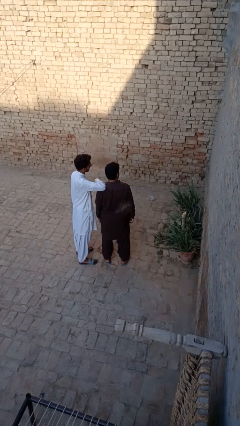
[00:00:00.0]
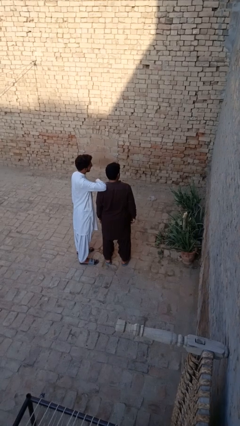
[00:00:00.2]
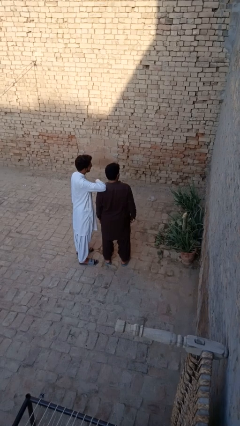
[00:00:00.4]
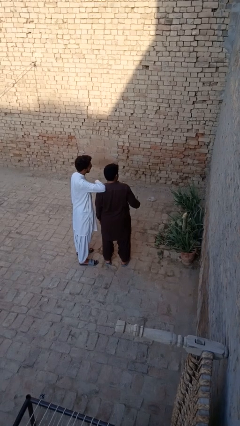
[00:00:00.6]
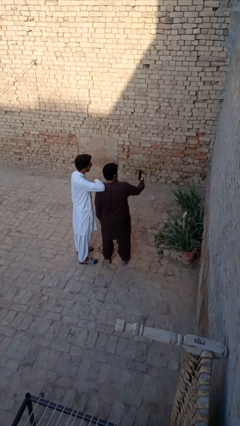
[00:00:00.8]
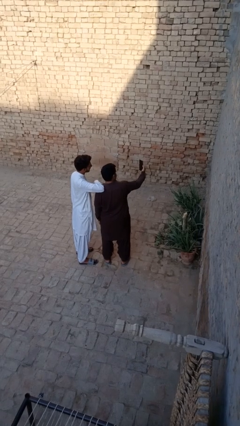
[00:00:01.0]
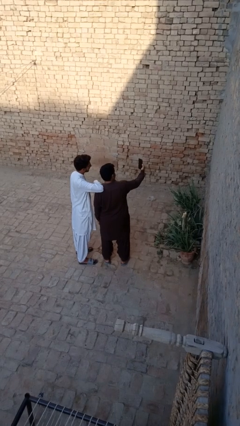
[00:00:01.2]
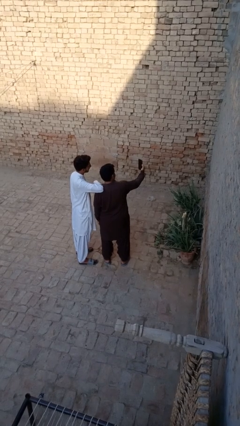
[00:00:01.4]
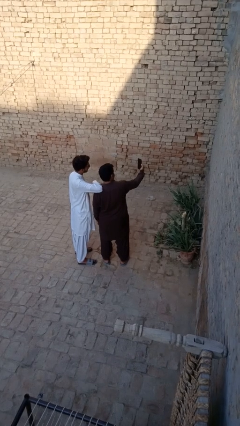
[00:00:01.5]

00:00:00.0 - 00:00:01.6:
person takes selfie with person

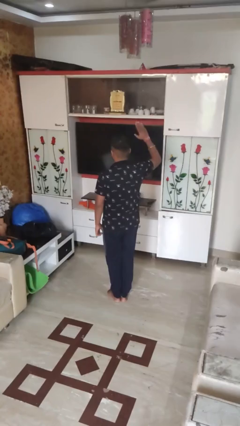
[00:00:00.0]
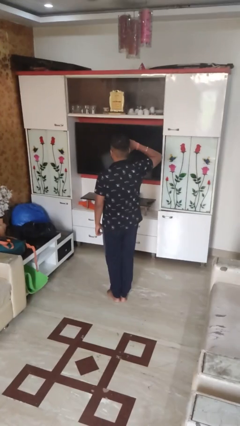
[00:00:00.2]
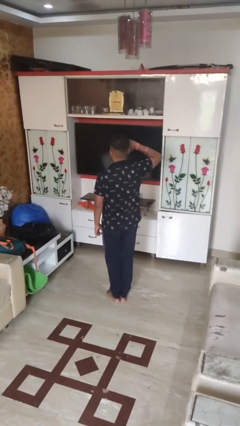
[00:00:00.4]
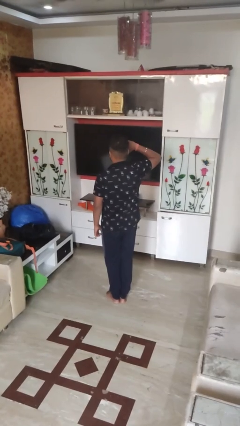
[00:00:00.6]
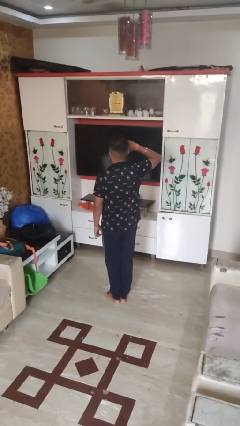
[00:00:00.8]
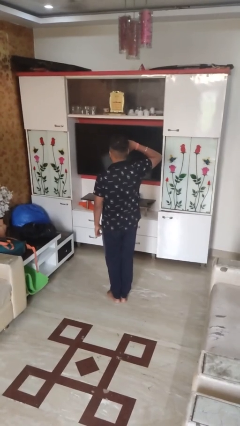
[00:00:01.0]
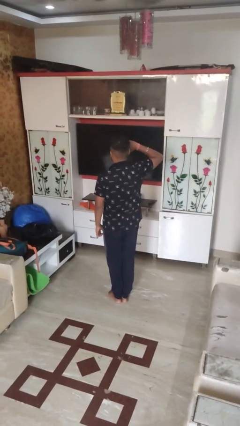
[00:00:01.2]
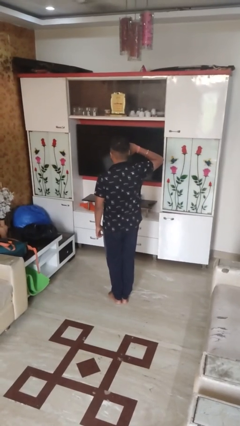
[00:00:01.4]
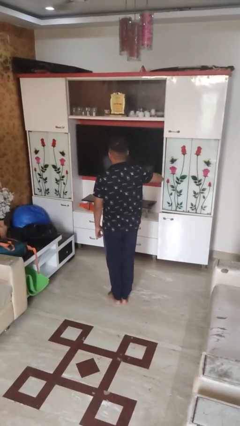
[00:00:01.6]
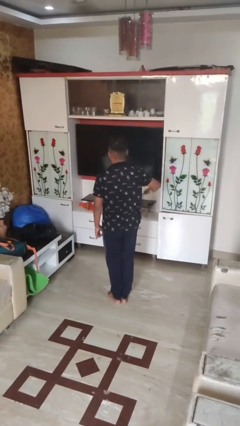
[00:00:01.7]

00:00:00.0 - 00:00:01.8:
person salutes

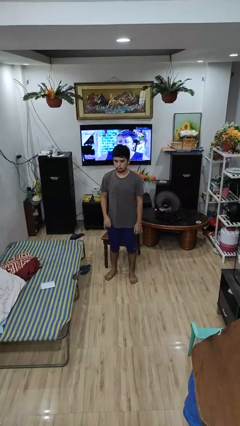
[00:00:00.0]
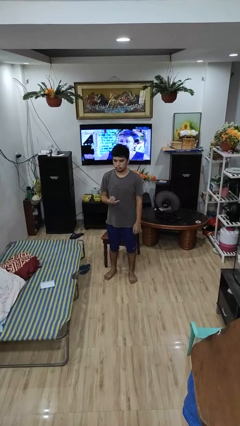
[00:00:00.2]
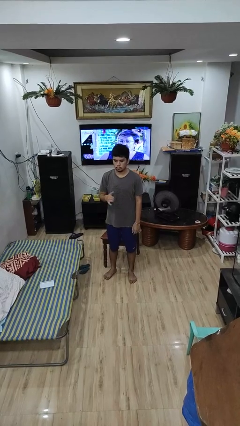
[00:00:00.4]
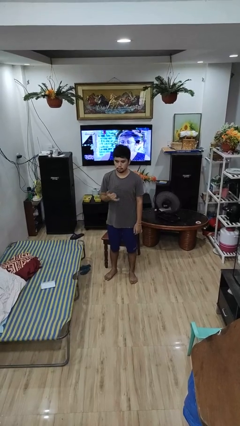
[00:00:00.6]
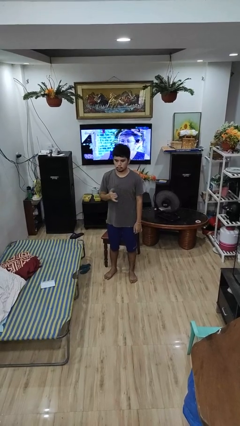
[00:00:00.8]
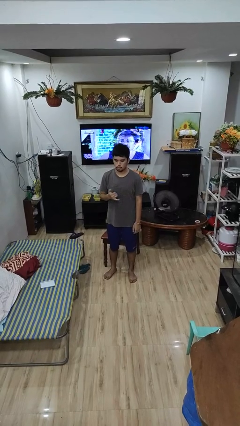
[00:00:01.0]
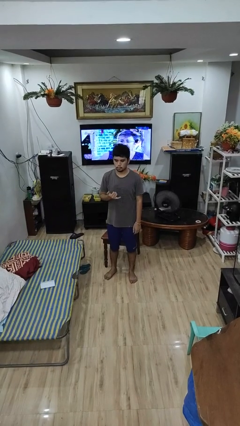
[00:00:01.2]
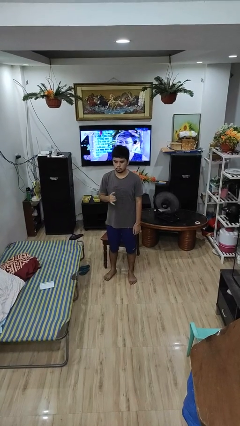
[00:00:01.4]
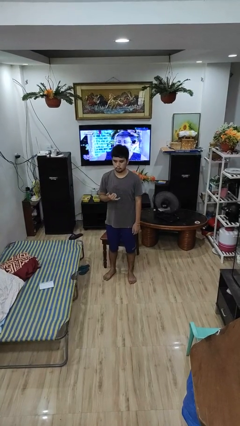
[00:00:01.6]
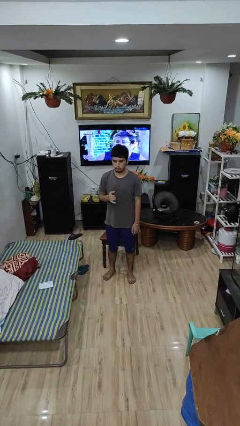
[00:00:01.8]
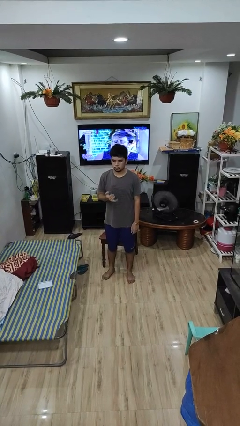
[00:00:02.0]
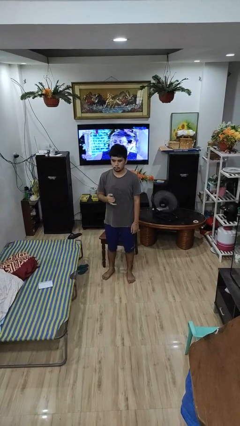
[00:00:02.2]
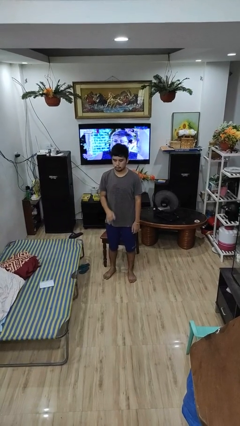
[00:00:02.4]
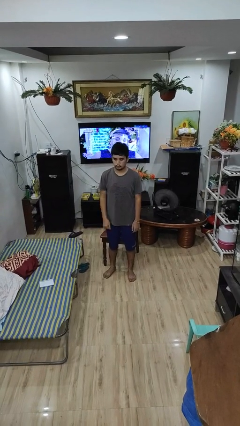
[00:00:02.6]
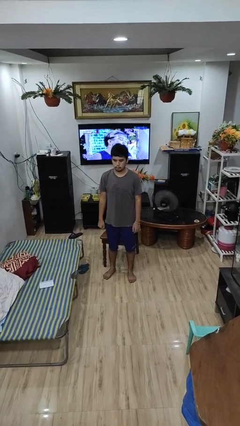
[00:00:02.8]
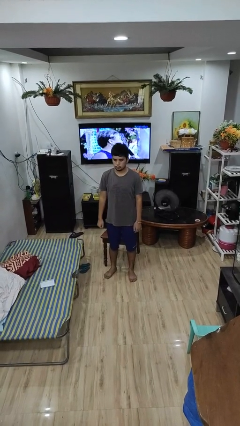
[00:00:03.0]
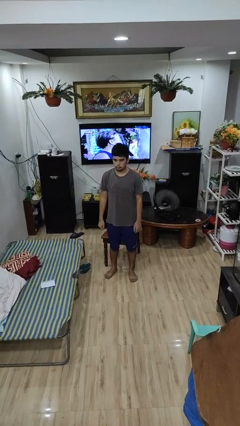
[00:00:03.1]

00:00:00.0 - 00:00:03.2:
person gestures hang loose

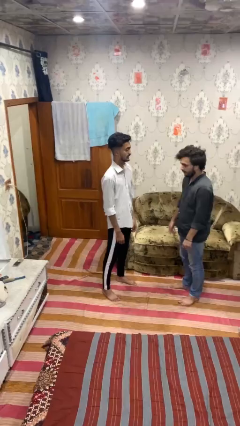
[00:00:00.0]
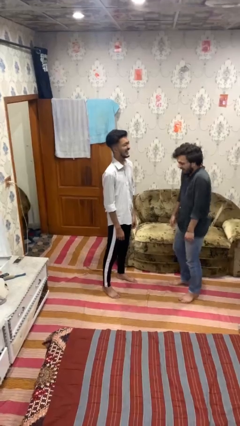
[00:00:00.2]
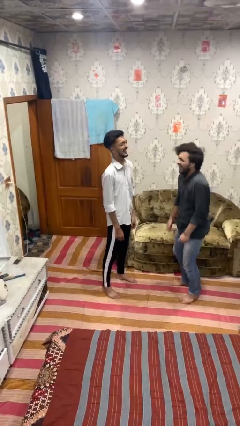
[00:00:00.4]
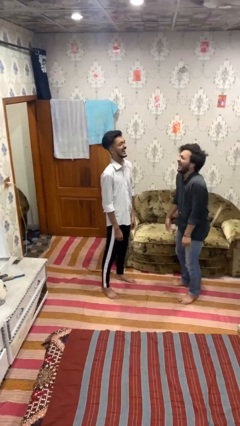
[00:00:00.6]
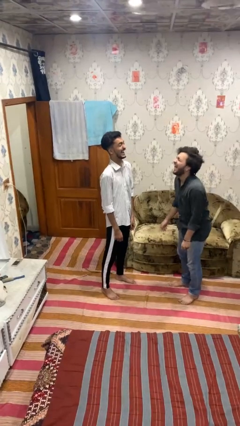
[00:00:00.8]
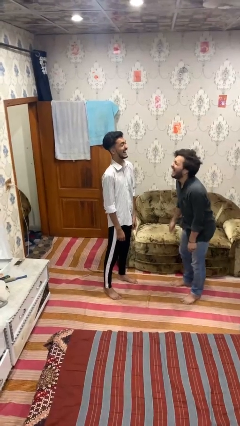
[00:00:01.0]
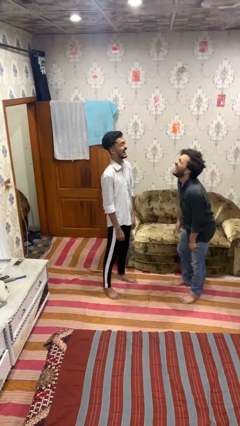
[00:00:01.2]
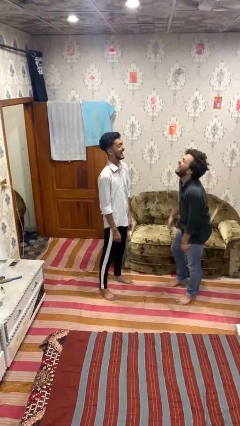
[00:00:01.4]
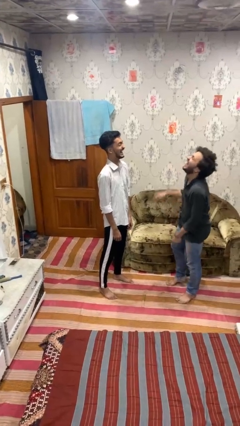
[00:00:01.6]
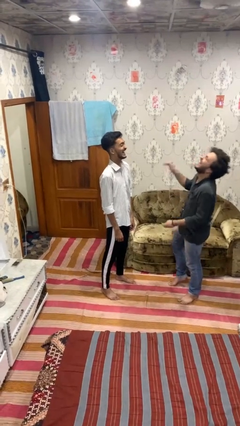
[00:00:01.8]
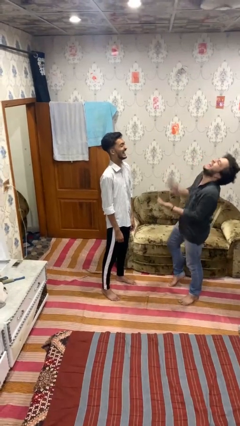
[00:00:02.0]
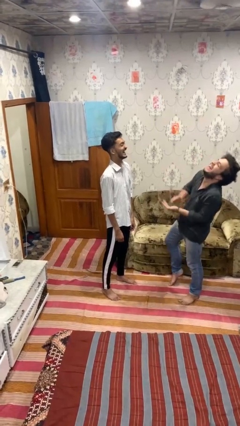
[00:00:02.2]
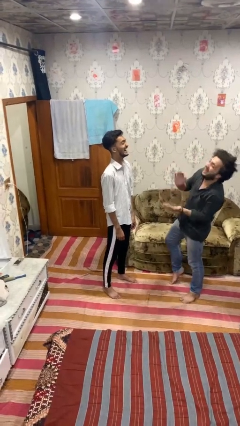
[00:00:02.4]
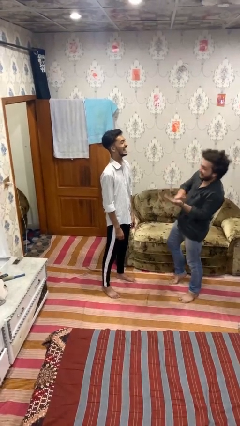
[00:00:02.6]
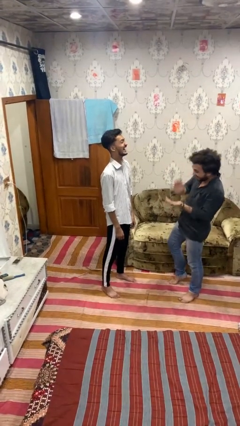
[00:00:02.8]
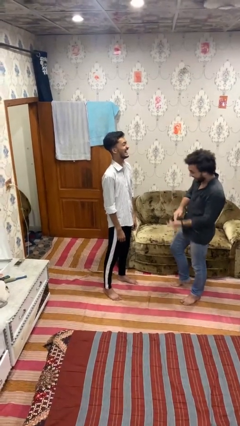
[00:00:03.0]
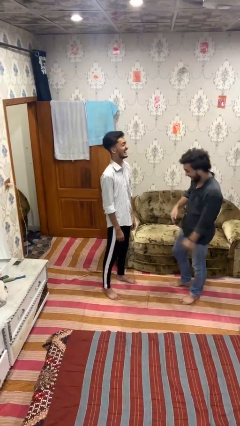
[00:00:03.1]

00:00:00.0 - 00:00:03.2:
person laughs with person

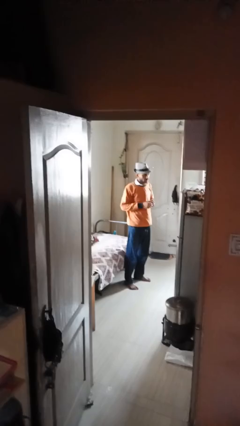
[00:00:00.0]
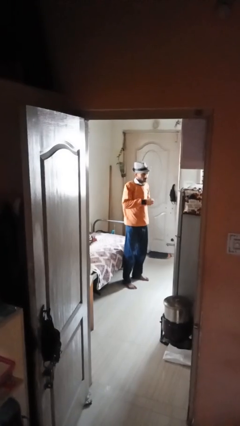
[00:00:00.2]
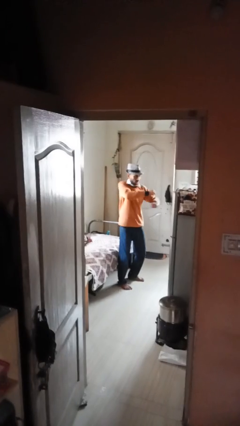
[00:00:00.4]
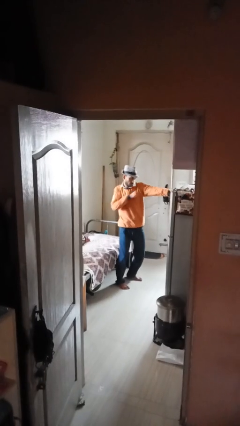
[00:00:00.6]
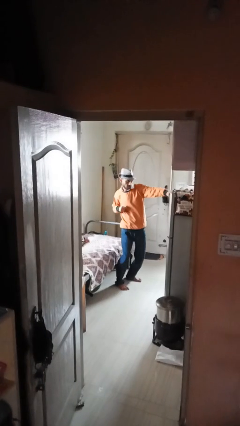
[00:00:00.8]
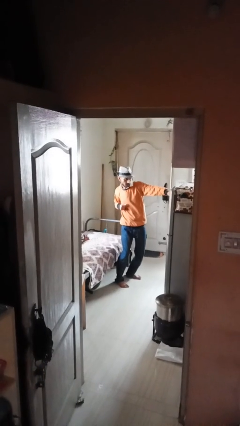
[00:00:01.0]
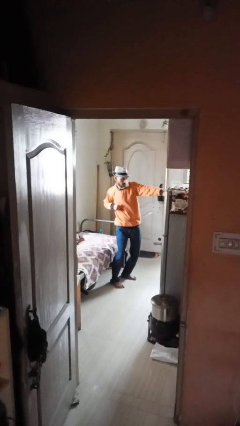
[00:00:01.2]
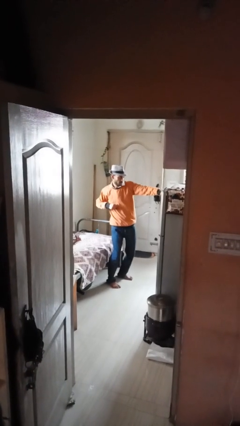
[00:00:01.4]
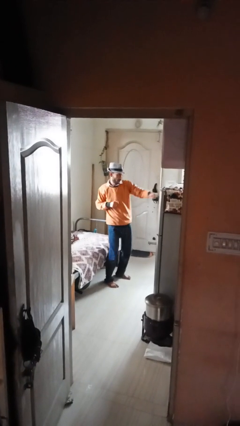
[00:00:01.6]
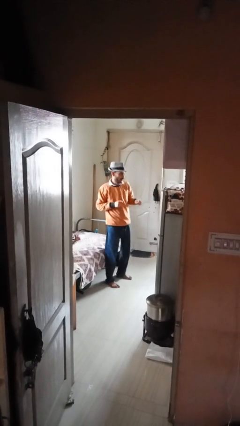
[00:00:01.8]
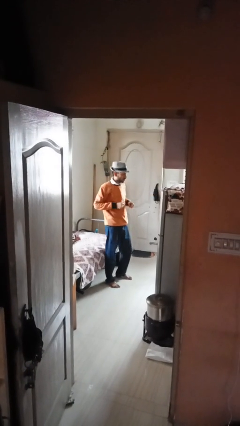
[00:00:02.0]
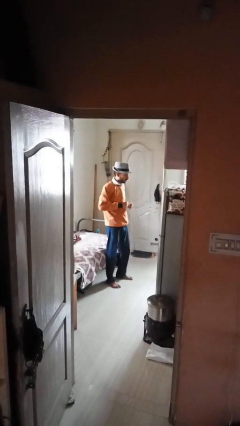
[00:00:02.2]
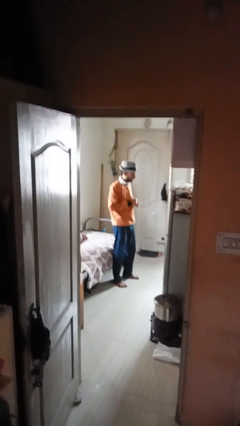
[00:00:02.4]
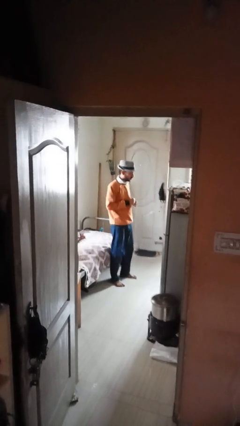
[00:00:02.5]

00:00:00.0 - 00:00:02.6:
person punches

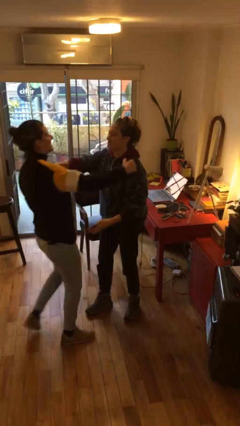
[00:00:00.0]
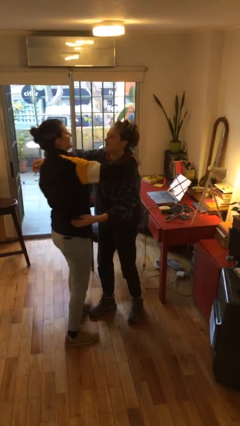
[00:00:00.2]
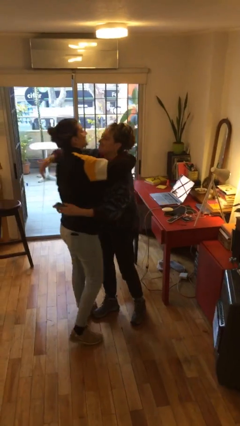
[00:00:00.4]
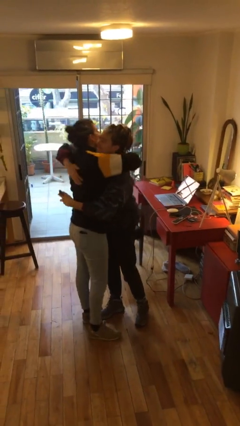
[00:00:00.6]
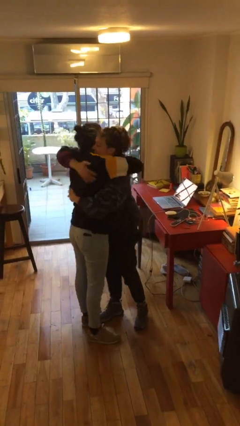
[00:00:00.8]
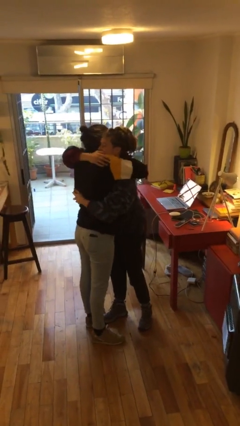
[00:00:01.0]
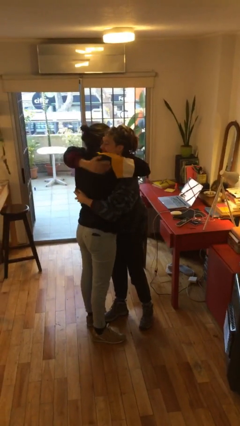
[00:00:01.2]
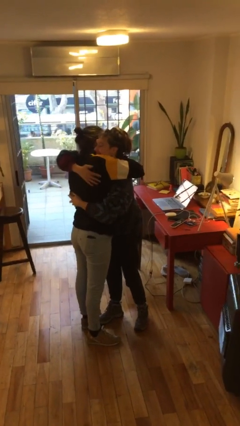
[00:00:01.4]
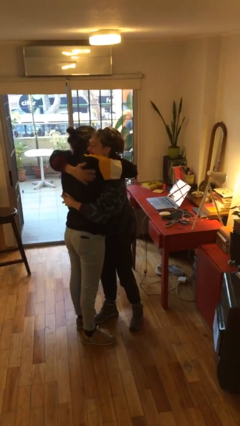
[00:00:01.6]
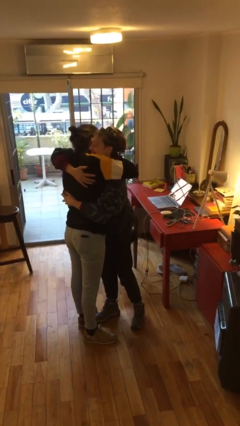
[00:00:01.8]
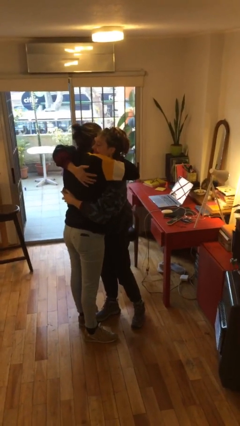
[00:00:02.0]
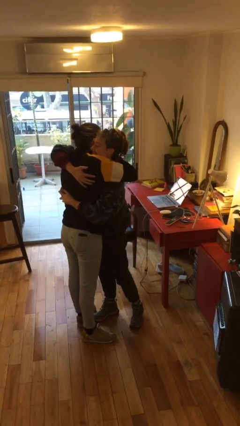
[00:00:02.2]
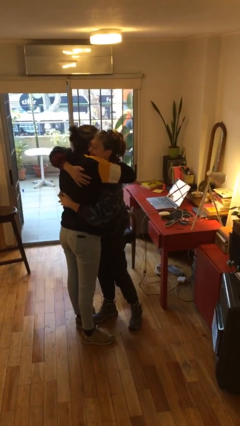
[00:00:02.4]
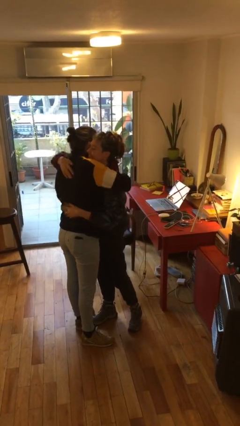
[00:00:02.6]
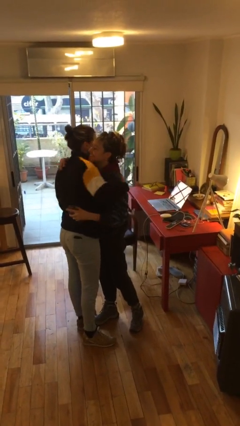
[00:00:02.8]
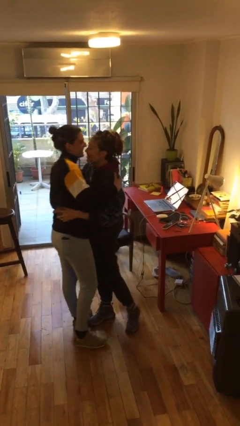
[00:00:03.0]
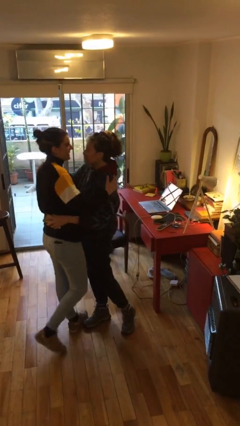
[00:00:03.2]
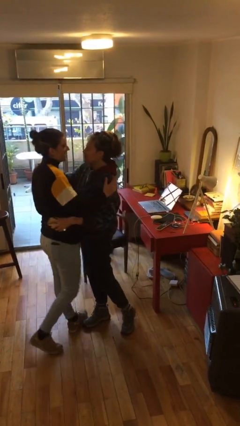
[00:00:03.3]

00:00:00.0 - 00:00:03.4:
person embraces person

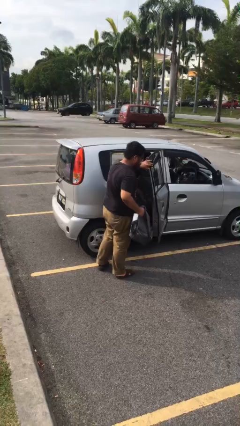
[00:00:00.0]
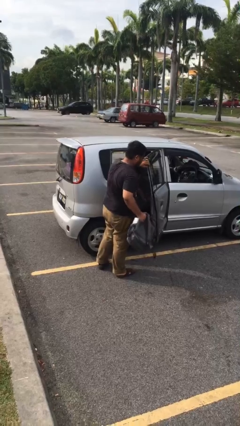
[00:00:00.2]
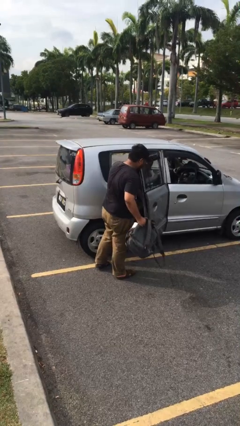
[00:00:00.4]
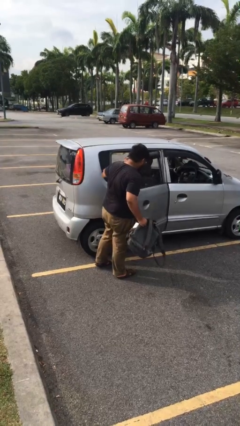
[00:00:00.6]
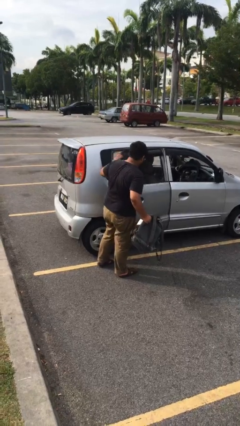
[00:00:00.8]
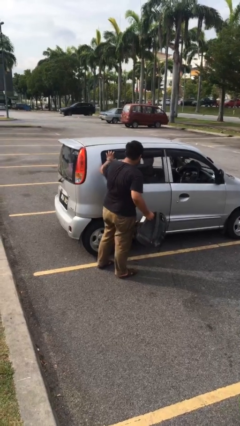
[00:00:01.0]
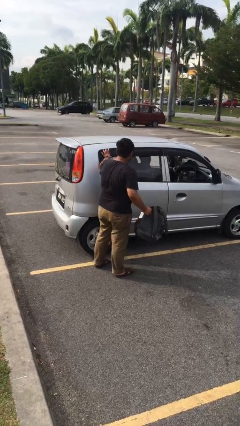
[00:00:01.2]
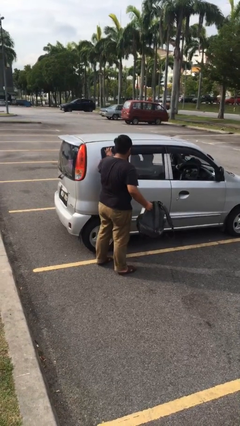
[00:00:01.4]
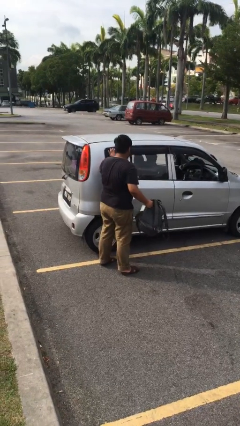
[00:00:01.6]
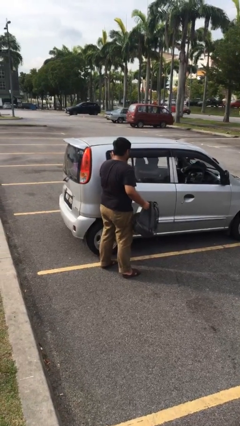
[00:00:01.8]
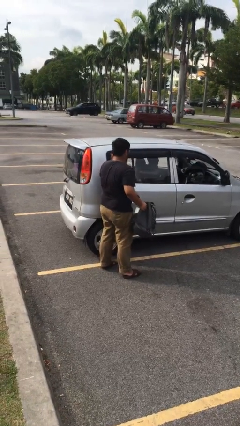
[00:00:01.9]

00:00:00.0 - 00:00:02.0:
person closes car door
